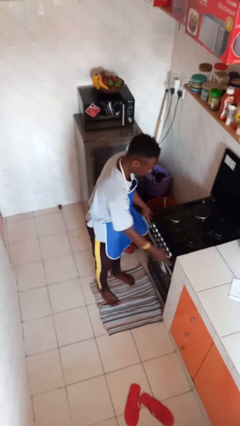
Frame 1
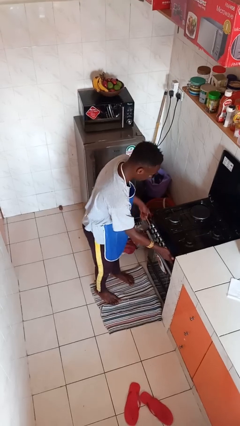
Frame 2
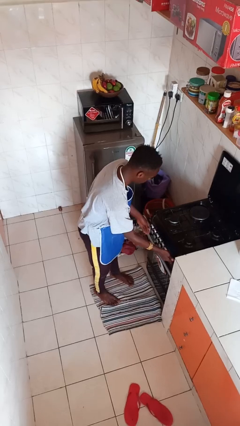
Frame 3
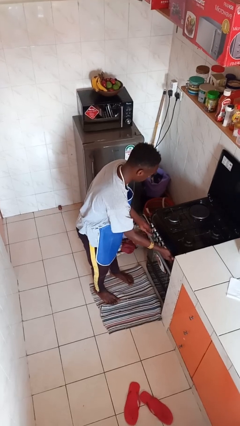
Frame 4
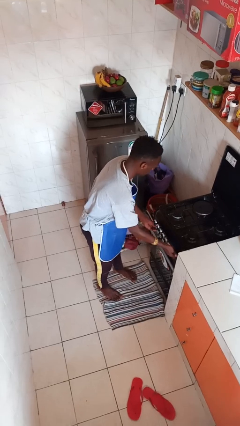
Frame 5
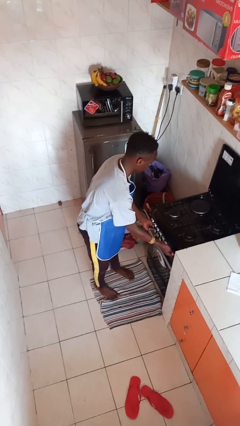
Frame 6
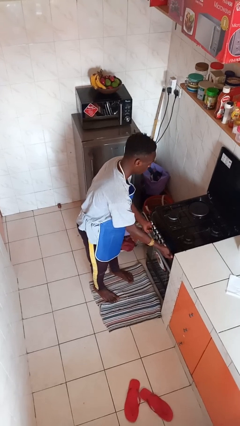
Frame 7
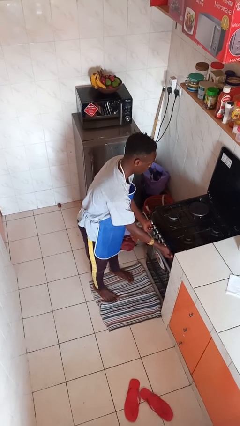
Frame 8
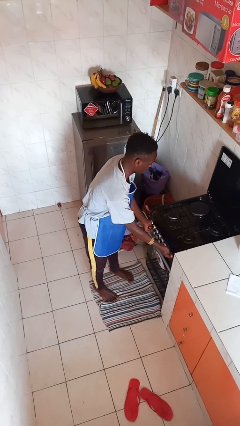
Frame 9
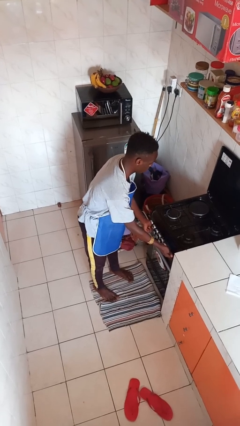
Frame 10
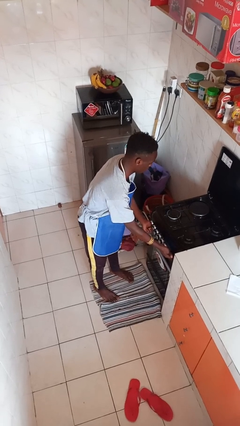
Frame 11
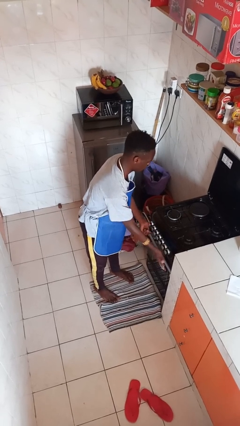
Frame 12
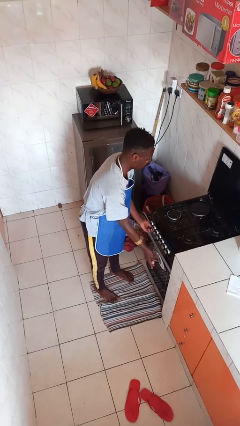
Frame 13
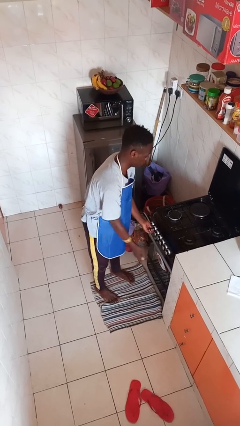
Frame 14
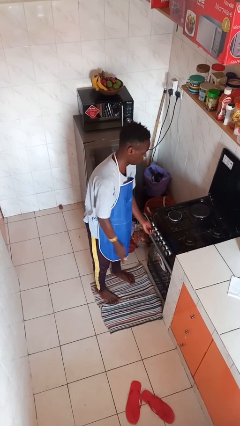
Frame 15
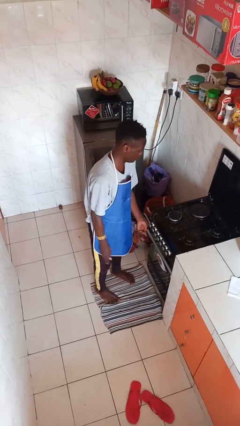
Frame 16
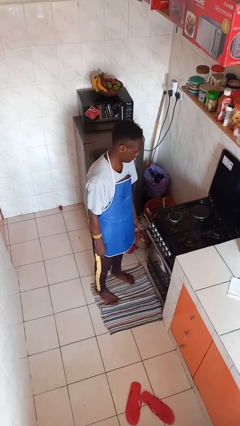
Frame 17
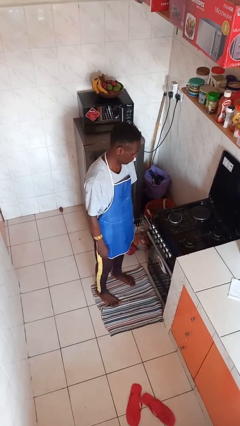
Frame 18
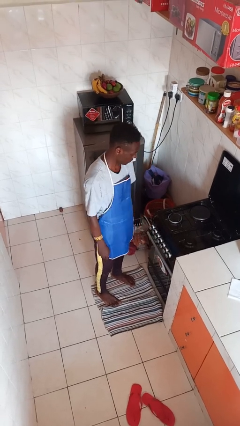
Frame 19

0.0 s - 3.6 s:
person turns on stovetop

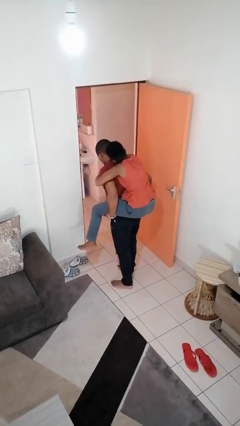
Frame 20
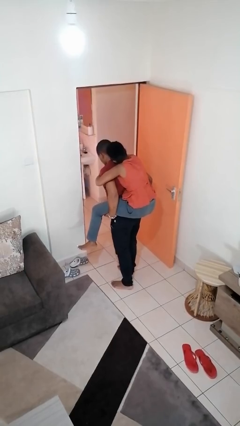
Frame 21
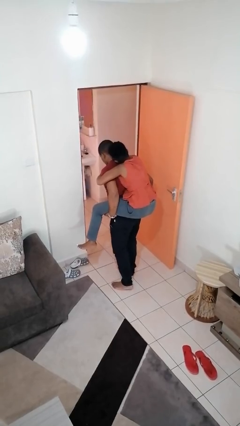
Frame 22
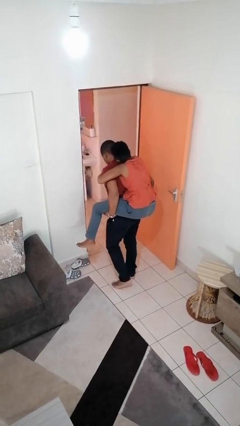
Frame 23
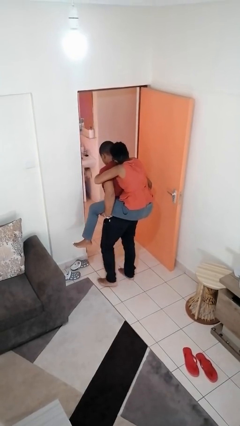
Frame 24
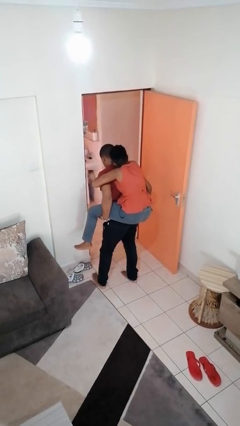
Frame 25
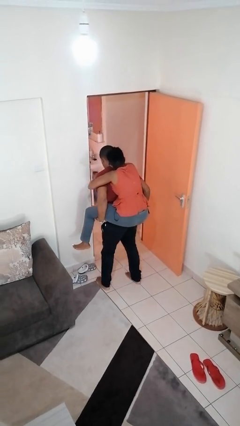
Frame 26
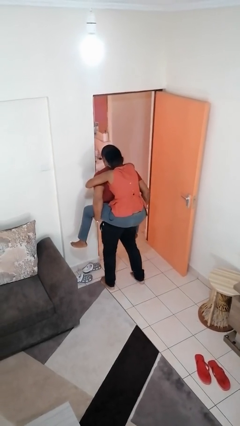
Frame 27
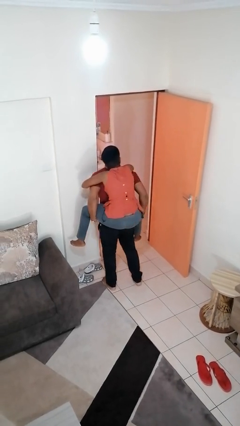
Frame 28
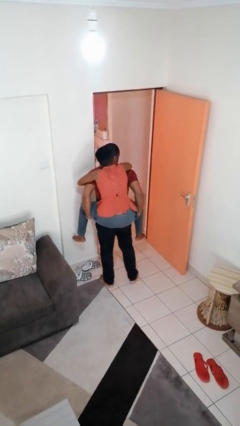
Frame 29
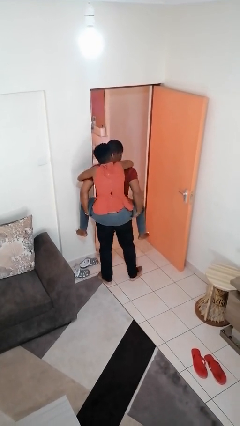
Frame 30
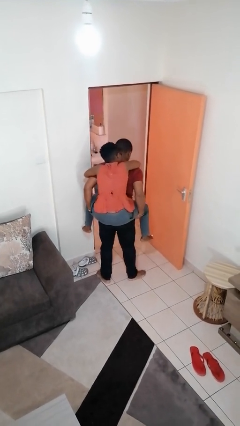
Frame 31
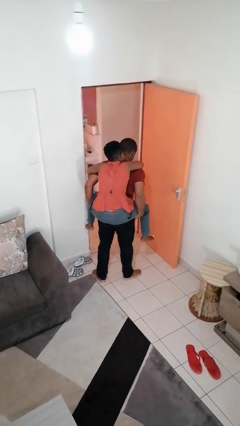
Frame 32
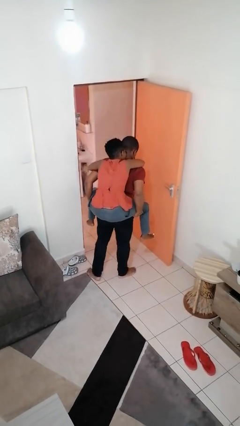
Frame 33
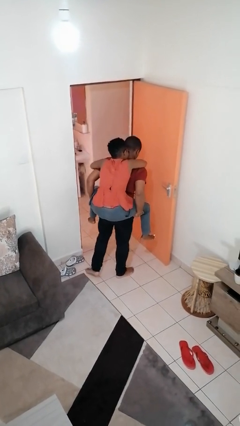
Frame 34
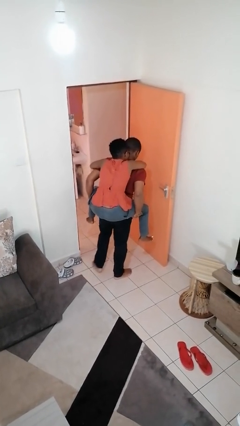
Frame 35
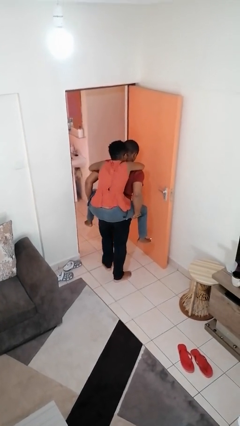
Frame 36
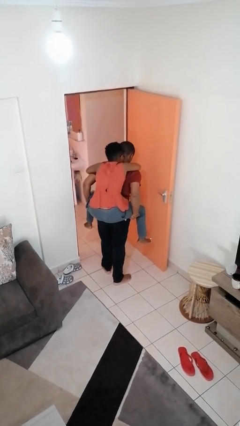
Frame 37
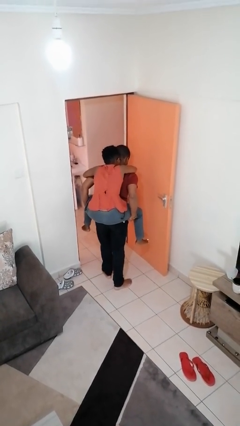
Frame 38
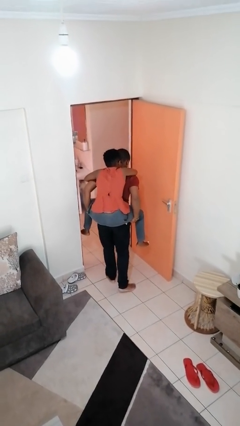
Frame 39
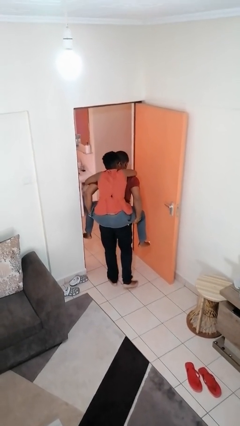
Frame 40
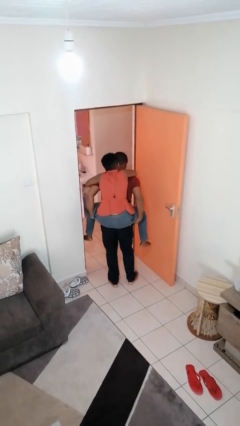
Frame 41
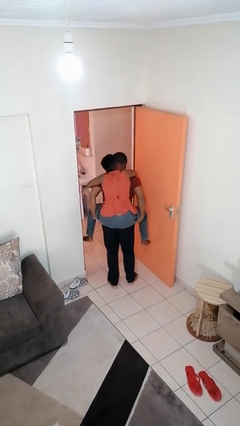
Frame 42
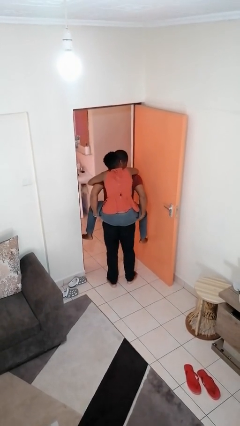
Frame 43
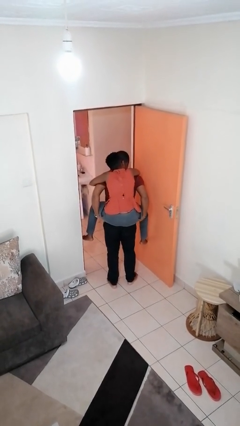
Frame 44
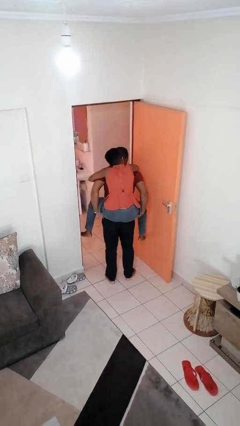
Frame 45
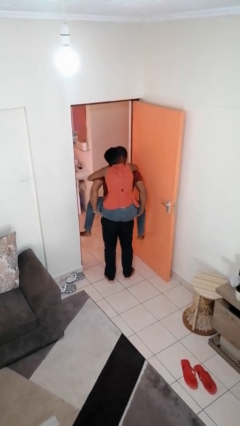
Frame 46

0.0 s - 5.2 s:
person carries person on back

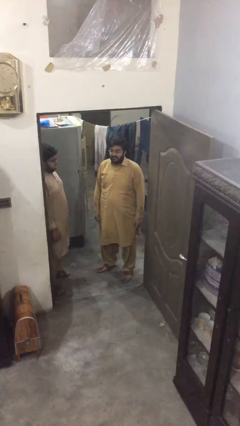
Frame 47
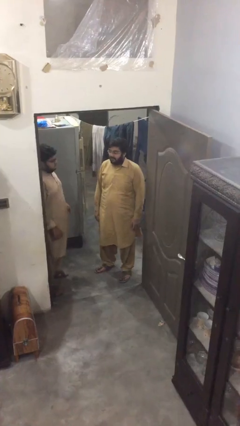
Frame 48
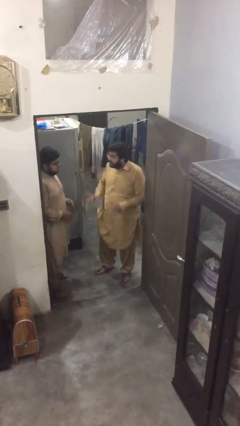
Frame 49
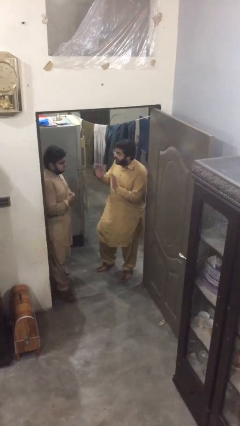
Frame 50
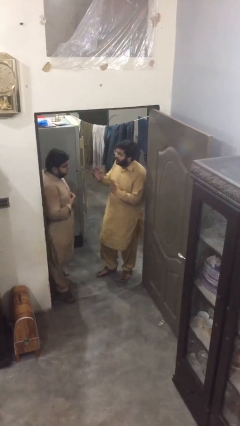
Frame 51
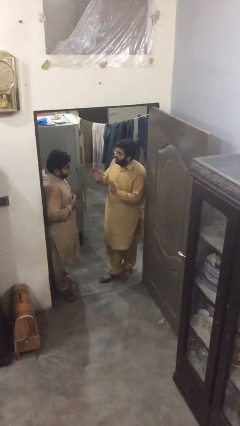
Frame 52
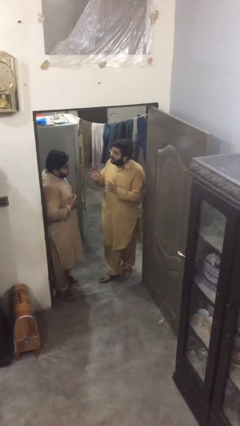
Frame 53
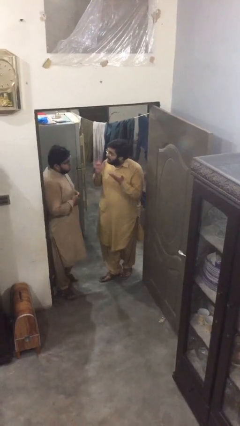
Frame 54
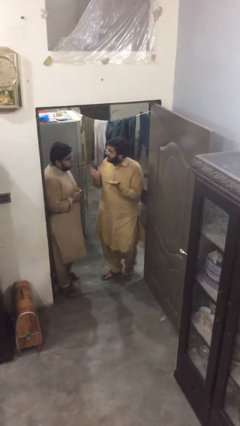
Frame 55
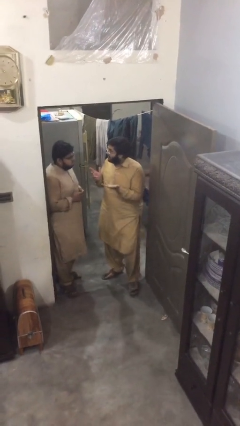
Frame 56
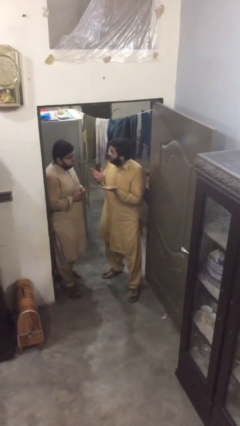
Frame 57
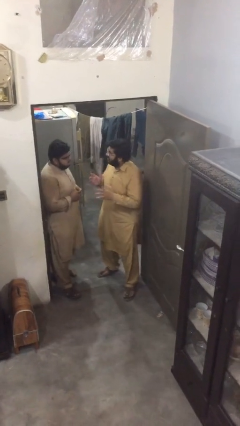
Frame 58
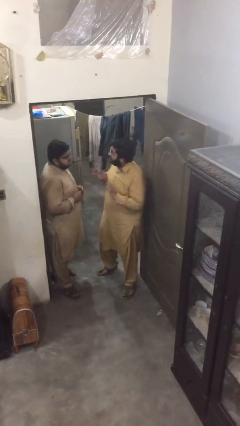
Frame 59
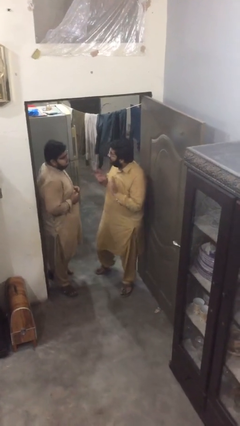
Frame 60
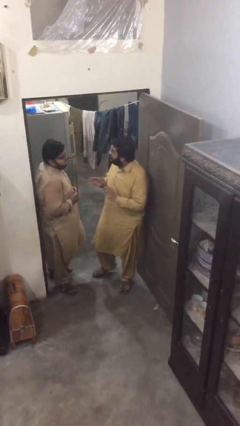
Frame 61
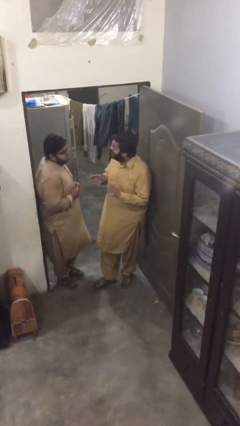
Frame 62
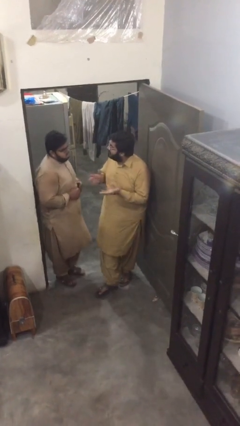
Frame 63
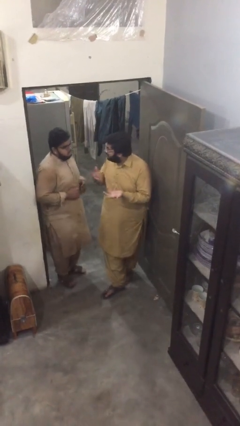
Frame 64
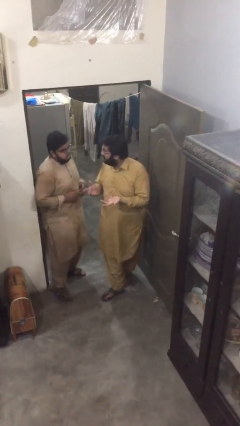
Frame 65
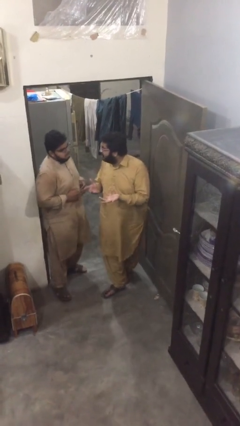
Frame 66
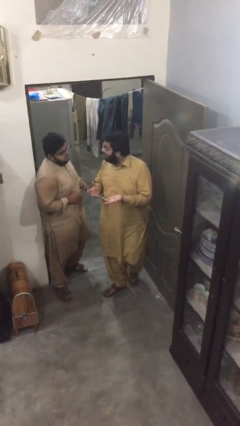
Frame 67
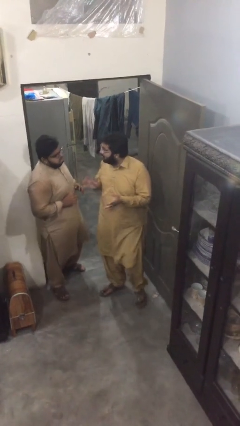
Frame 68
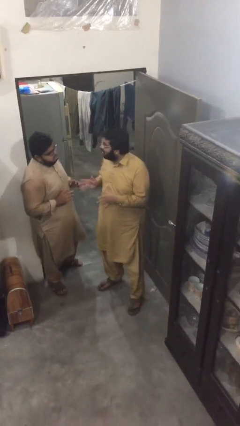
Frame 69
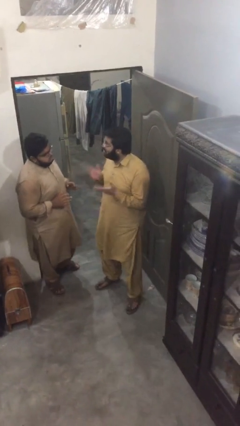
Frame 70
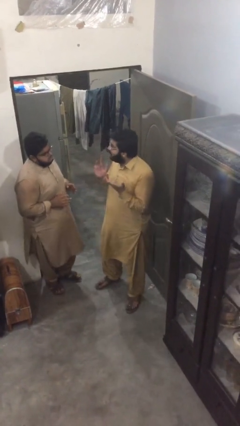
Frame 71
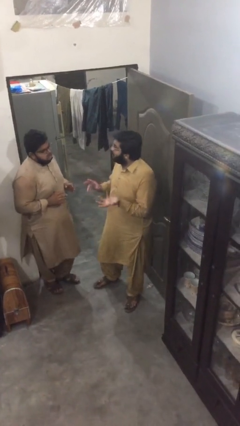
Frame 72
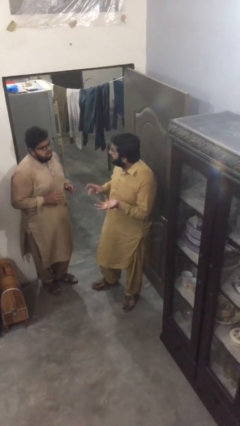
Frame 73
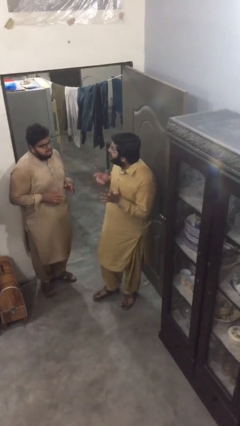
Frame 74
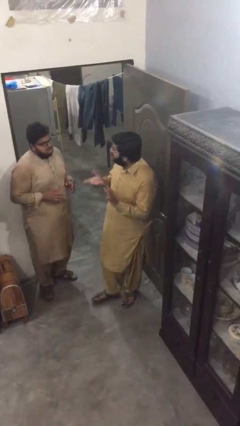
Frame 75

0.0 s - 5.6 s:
person talks to person

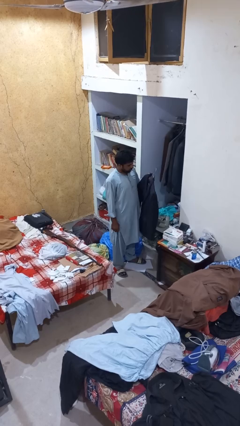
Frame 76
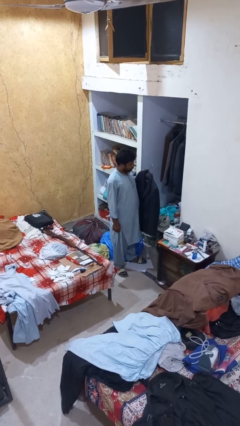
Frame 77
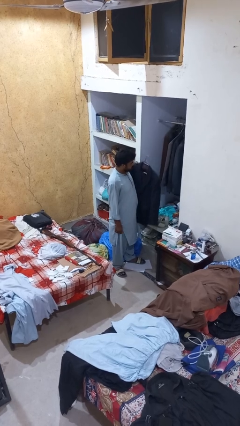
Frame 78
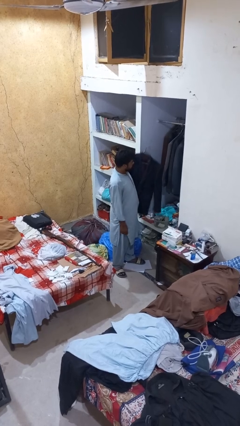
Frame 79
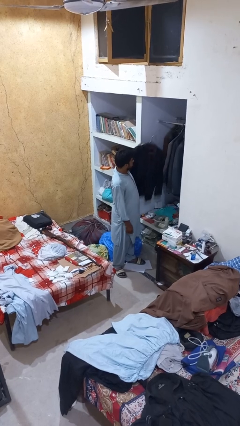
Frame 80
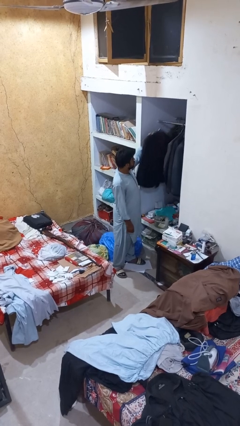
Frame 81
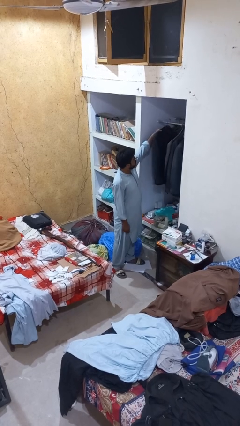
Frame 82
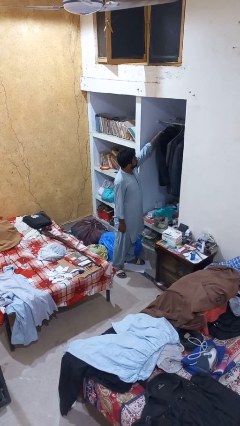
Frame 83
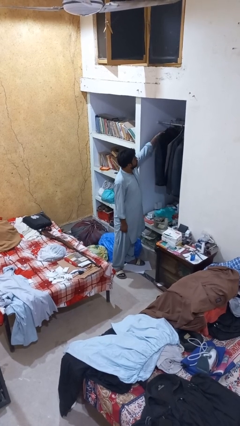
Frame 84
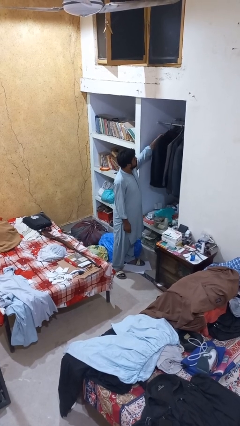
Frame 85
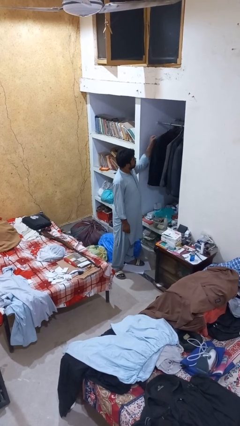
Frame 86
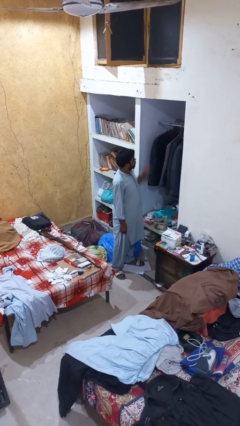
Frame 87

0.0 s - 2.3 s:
person puts clothes into closet

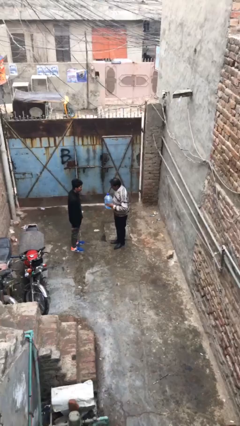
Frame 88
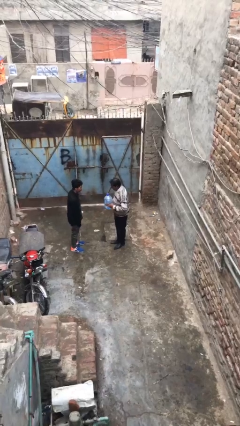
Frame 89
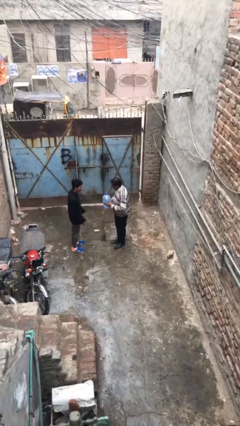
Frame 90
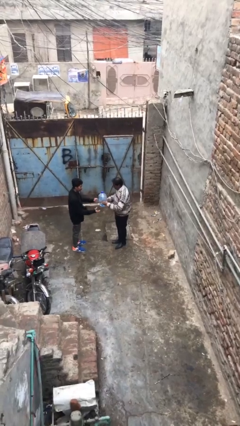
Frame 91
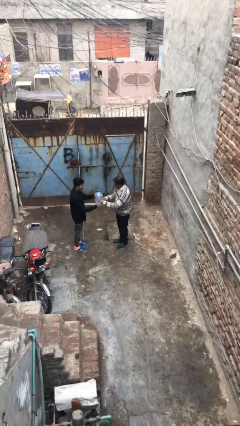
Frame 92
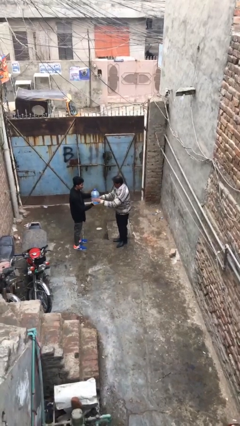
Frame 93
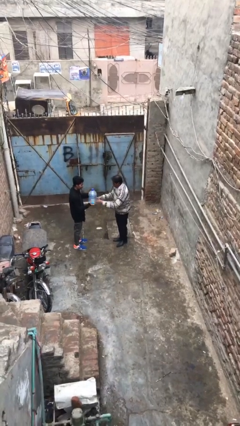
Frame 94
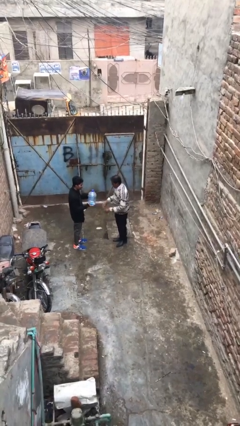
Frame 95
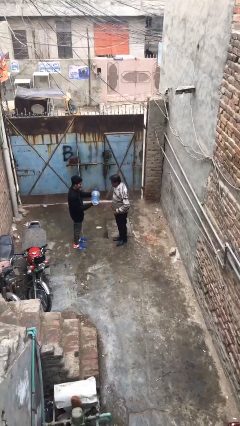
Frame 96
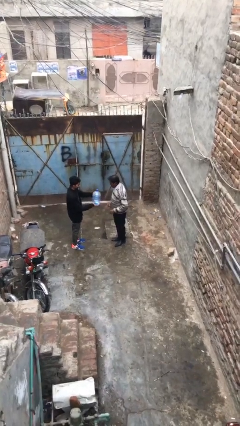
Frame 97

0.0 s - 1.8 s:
person transfers object to person
